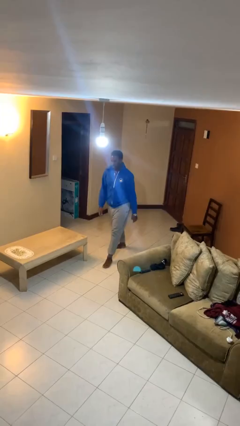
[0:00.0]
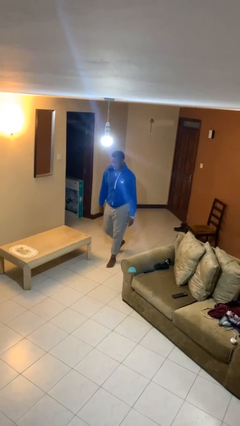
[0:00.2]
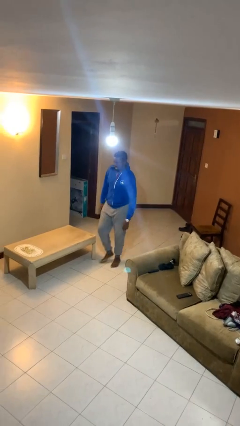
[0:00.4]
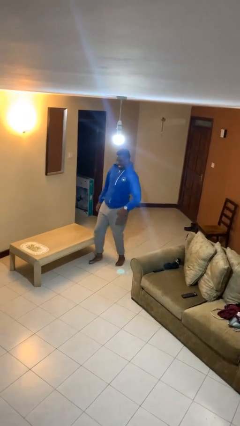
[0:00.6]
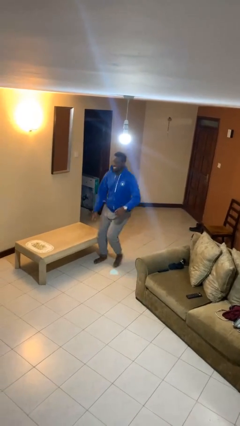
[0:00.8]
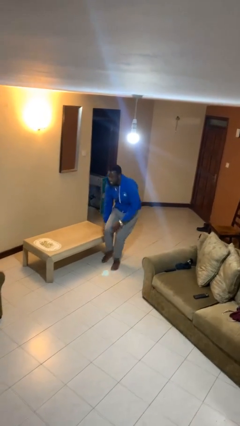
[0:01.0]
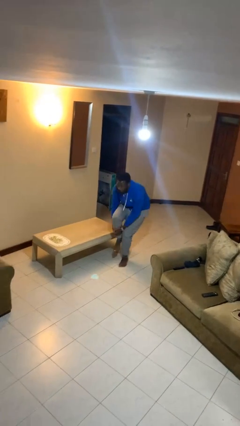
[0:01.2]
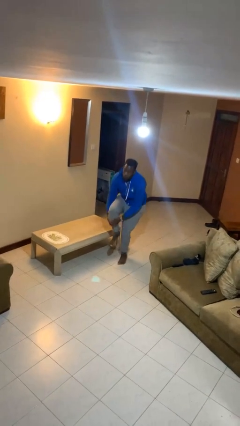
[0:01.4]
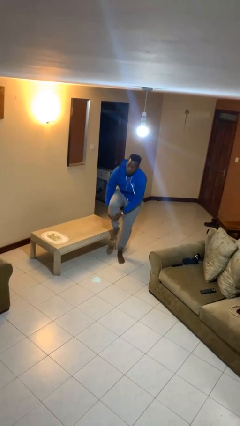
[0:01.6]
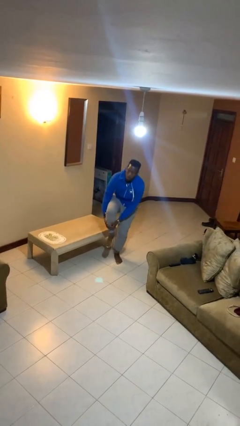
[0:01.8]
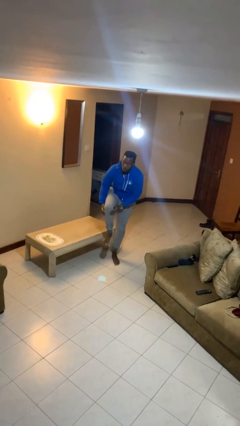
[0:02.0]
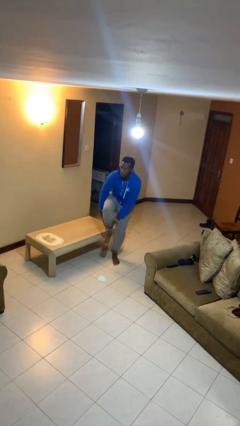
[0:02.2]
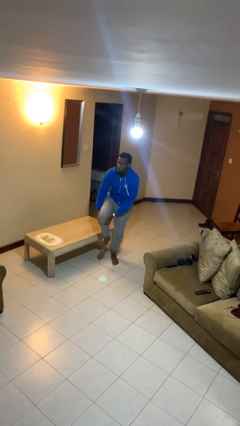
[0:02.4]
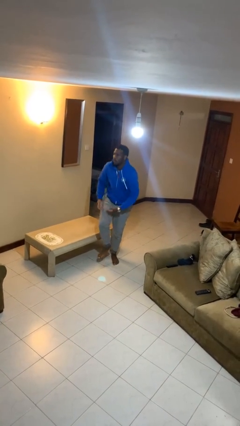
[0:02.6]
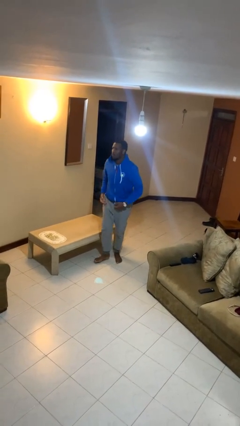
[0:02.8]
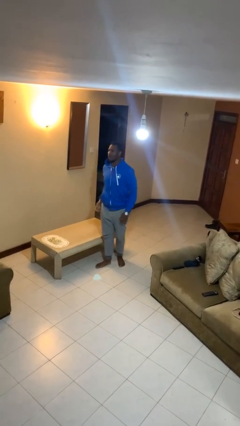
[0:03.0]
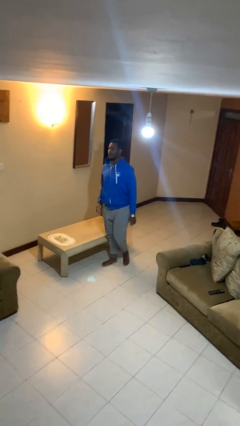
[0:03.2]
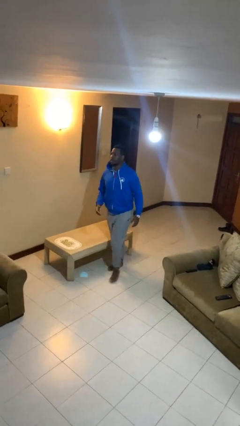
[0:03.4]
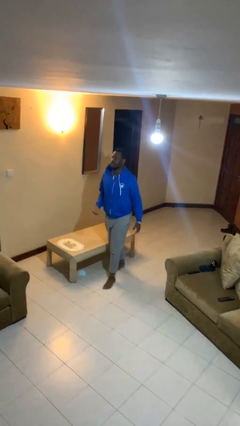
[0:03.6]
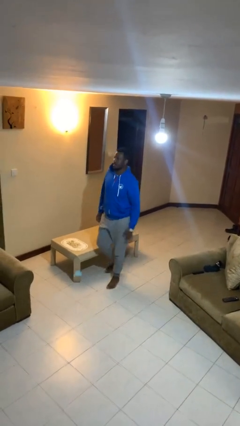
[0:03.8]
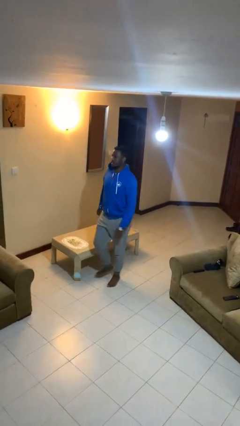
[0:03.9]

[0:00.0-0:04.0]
person bumps into table

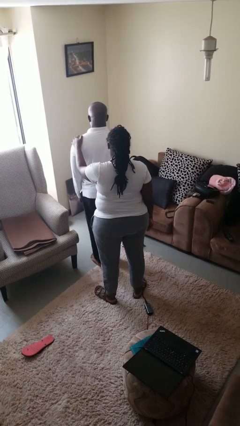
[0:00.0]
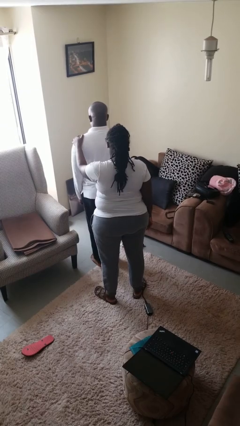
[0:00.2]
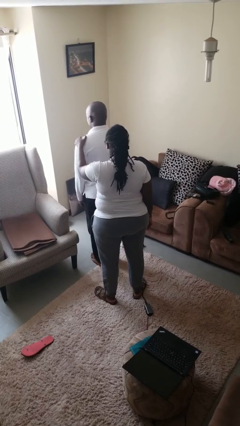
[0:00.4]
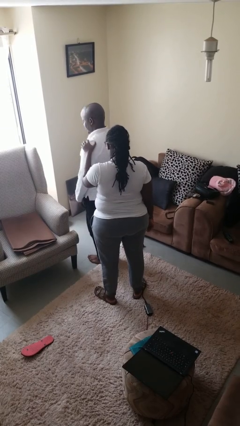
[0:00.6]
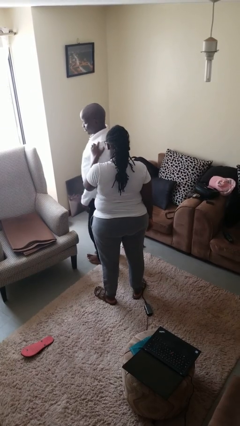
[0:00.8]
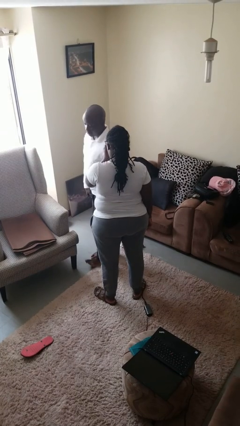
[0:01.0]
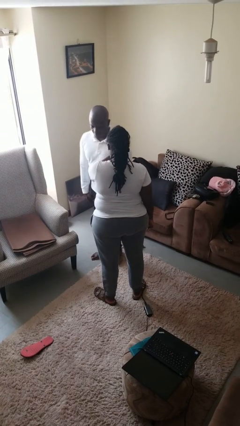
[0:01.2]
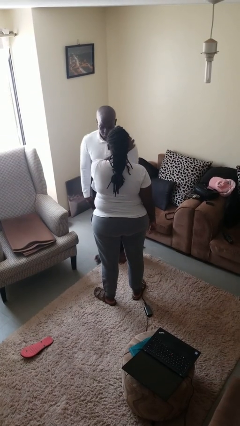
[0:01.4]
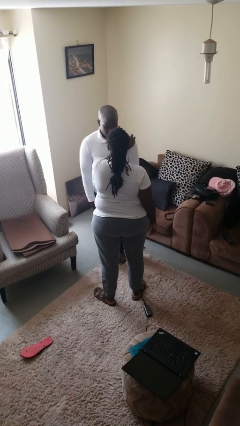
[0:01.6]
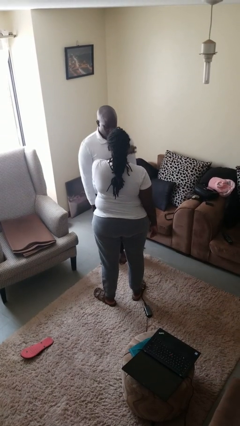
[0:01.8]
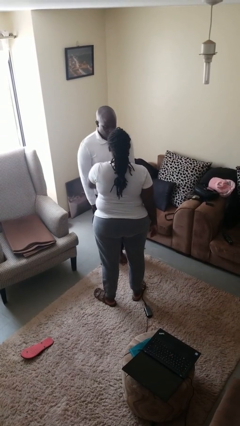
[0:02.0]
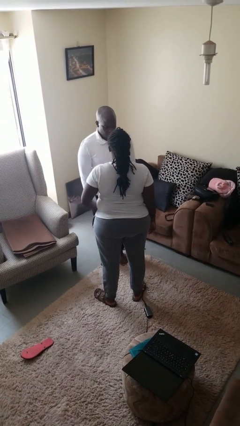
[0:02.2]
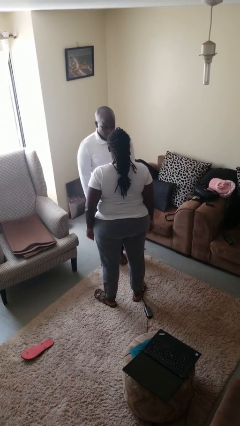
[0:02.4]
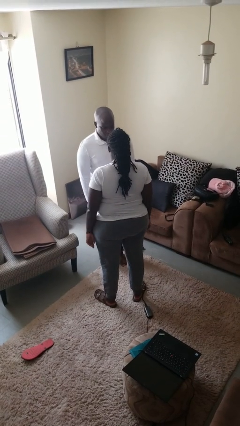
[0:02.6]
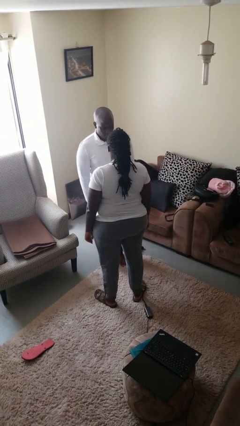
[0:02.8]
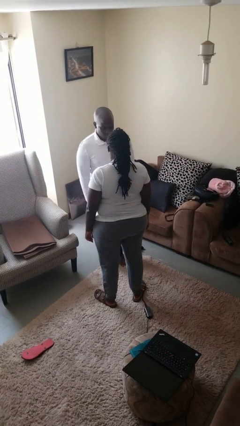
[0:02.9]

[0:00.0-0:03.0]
person spins person around

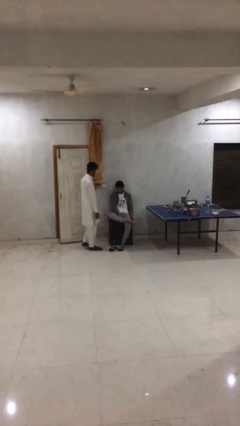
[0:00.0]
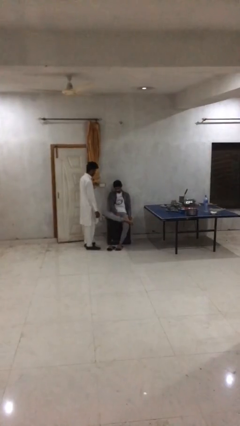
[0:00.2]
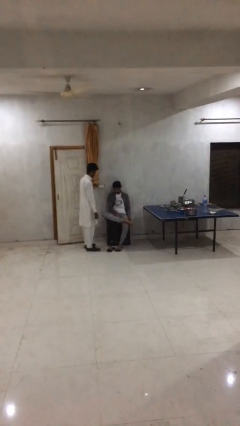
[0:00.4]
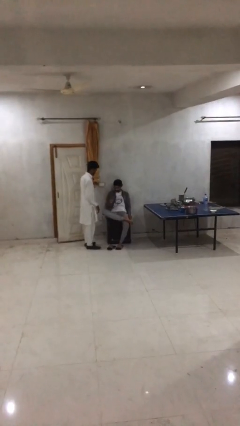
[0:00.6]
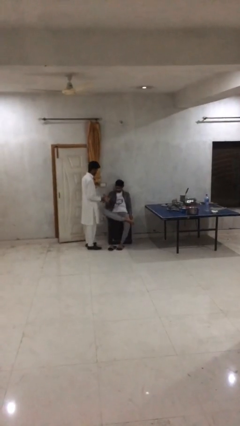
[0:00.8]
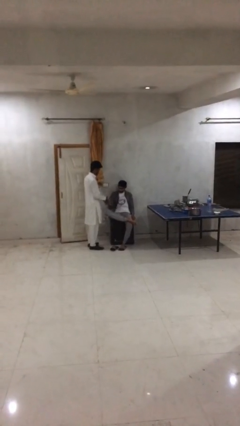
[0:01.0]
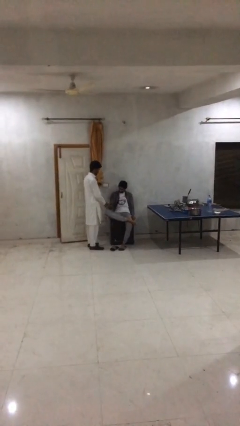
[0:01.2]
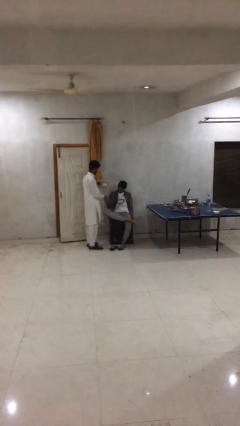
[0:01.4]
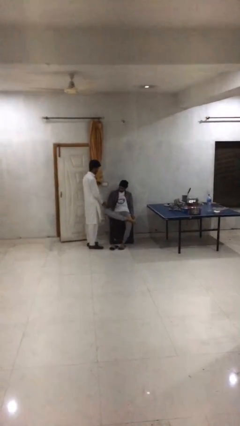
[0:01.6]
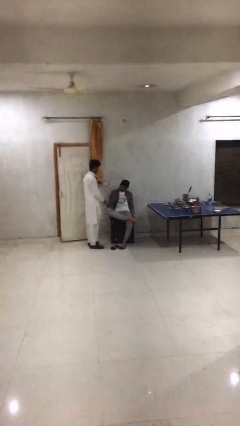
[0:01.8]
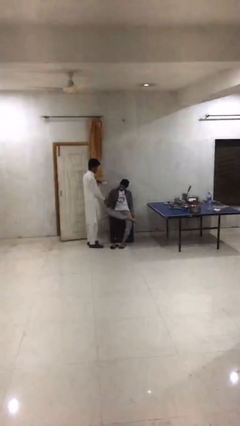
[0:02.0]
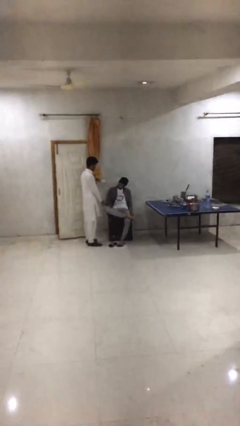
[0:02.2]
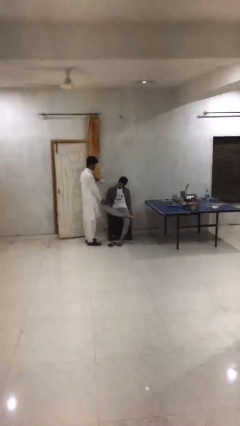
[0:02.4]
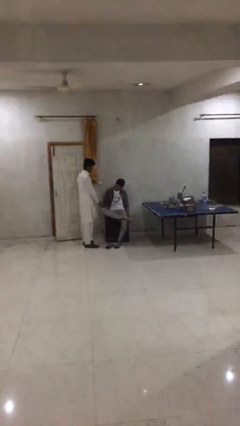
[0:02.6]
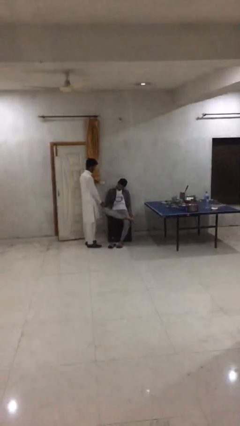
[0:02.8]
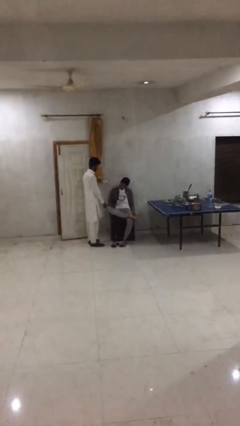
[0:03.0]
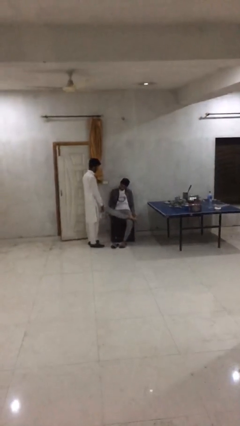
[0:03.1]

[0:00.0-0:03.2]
person shakes hand

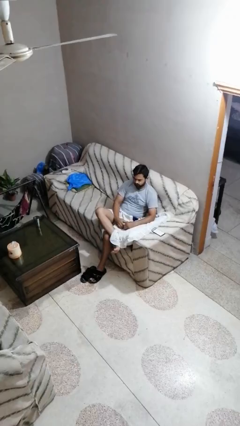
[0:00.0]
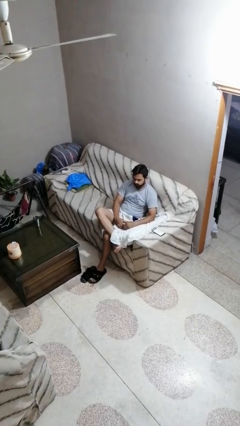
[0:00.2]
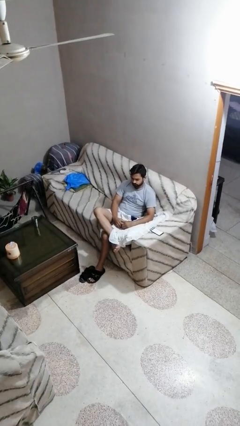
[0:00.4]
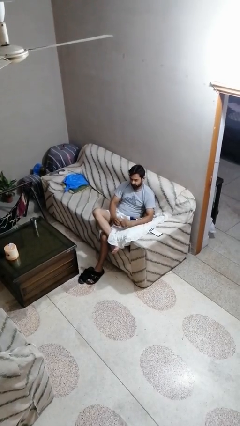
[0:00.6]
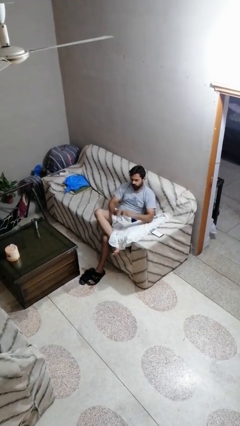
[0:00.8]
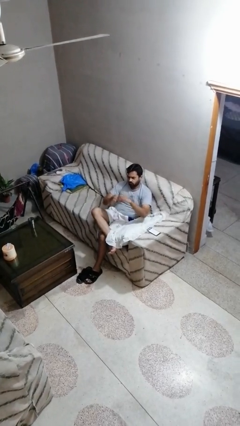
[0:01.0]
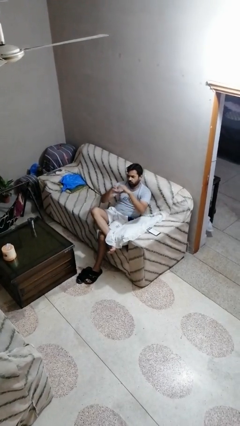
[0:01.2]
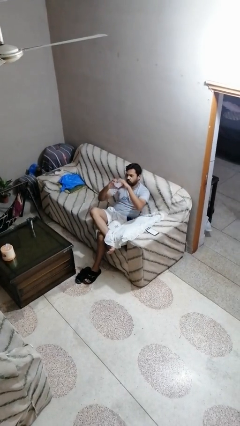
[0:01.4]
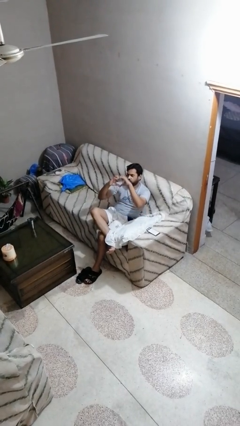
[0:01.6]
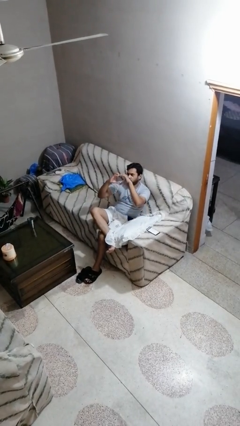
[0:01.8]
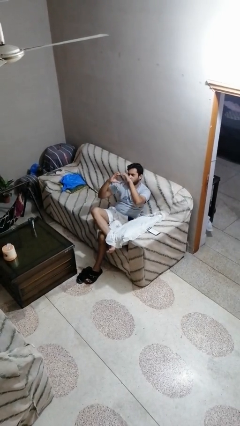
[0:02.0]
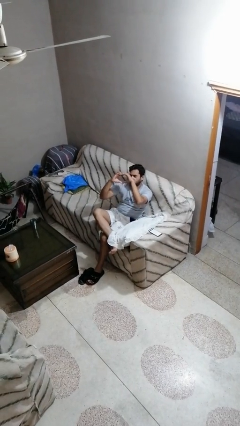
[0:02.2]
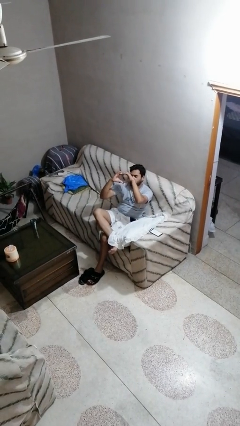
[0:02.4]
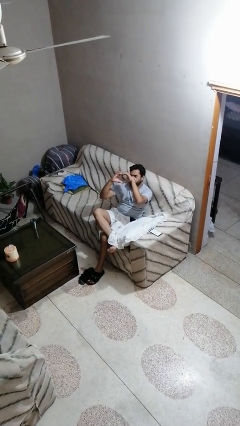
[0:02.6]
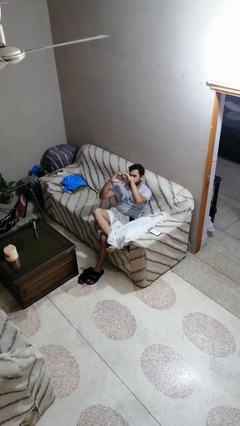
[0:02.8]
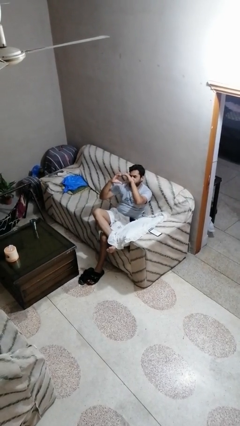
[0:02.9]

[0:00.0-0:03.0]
person gestures heart

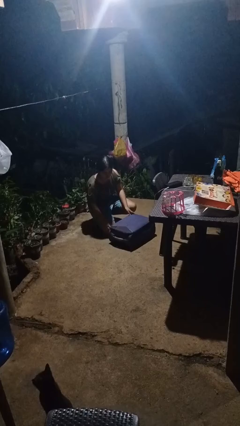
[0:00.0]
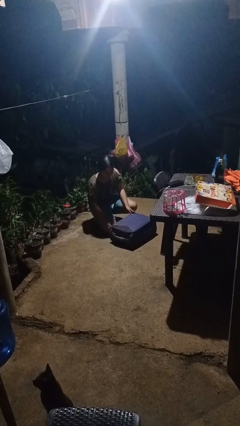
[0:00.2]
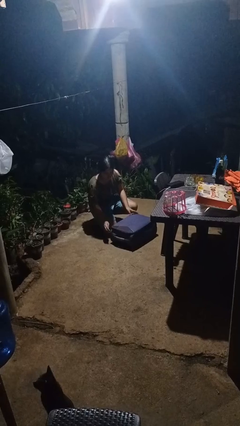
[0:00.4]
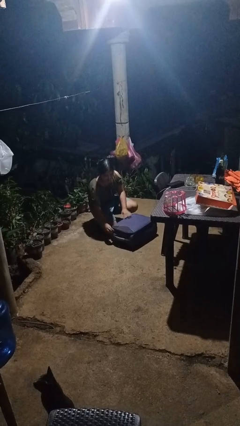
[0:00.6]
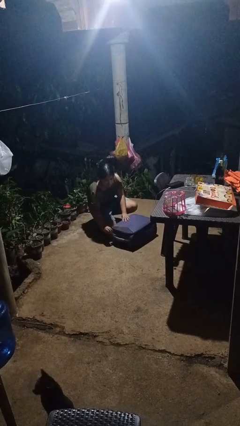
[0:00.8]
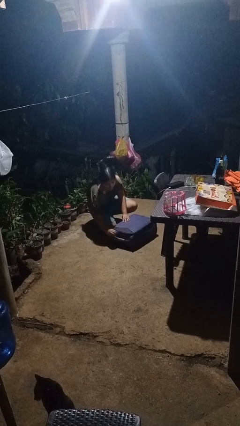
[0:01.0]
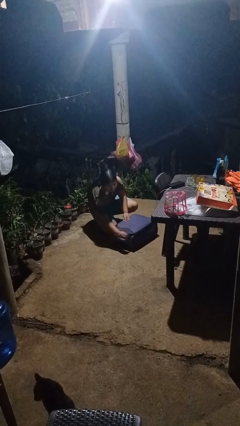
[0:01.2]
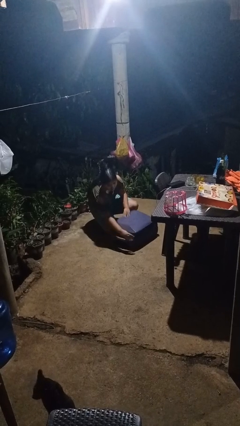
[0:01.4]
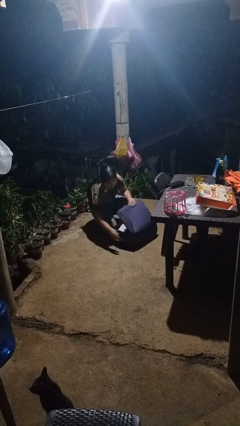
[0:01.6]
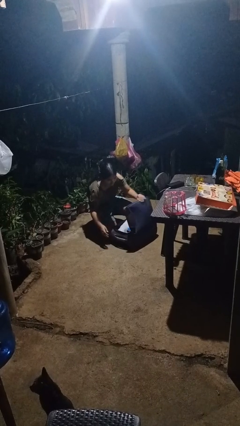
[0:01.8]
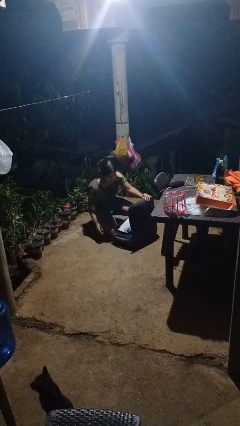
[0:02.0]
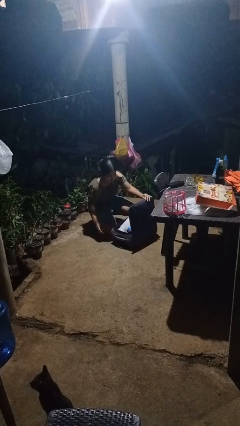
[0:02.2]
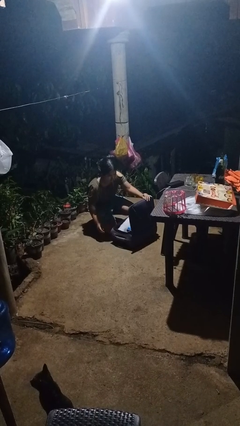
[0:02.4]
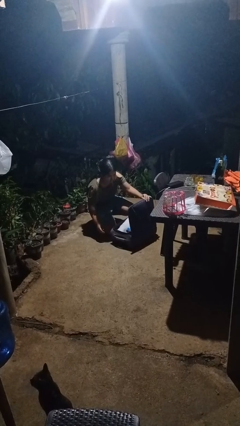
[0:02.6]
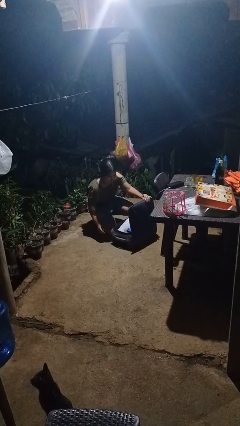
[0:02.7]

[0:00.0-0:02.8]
person opens suitcase

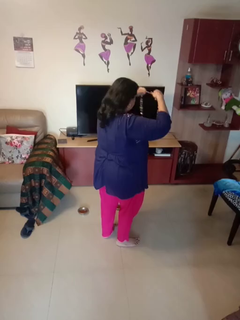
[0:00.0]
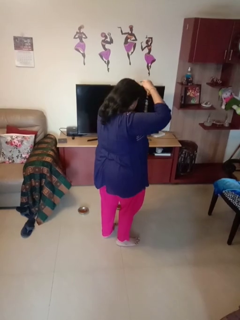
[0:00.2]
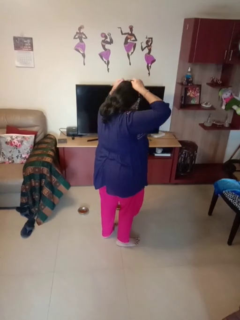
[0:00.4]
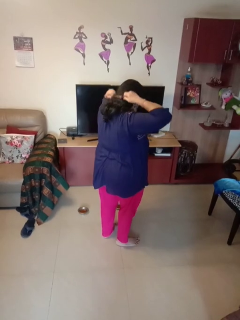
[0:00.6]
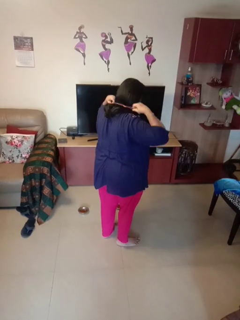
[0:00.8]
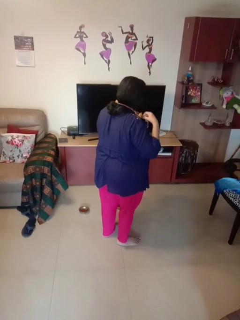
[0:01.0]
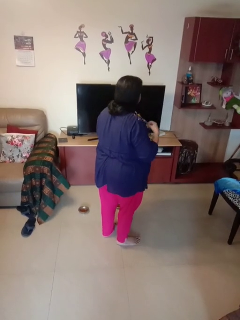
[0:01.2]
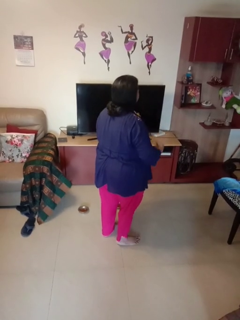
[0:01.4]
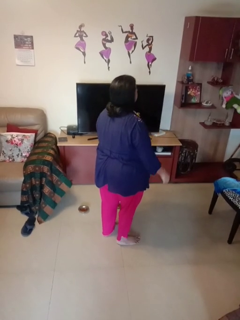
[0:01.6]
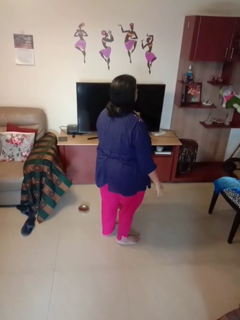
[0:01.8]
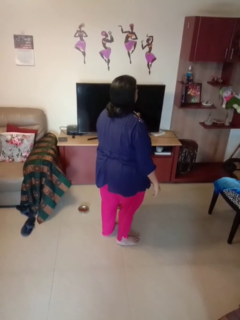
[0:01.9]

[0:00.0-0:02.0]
person puts on necklace
